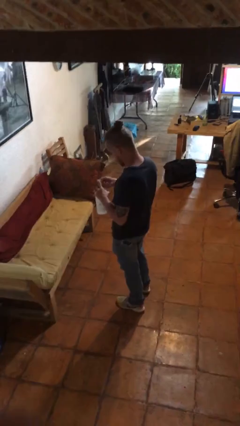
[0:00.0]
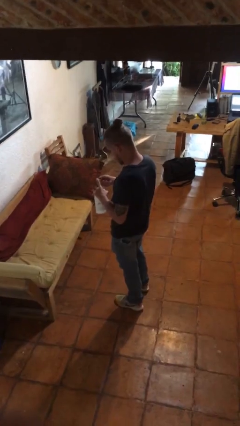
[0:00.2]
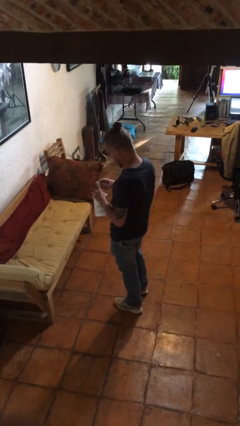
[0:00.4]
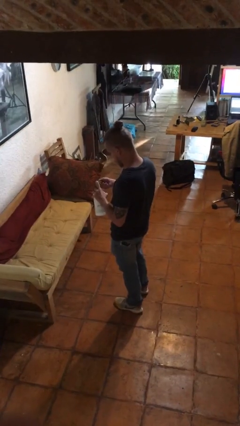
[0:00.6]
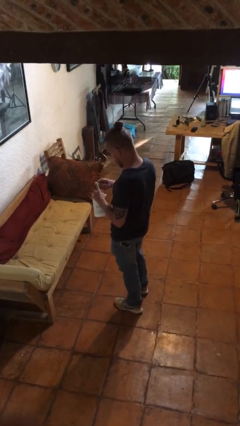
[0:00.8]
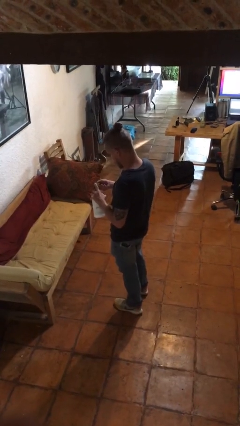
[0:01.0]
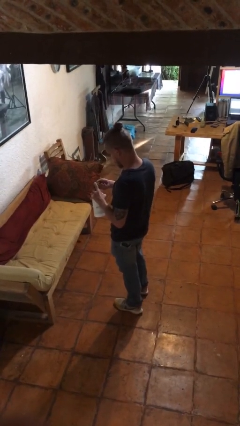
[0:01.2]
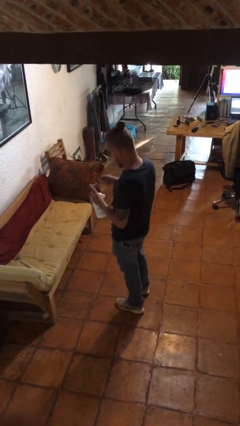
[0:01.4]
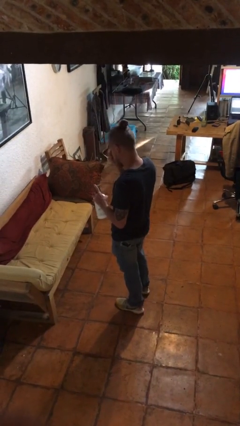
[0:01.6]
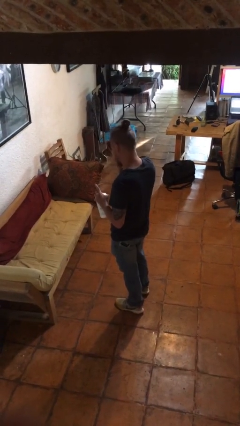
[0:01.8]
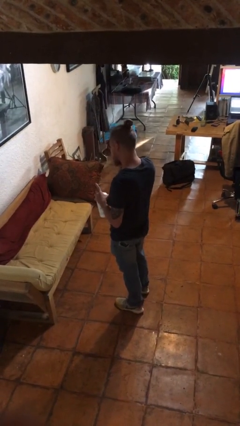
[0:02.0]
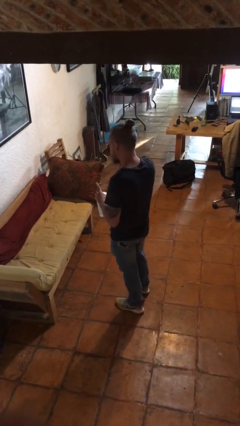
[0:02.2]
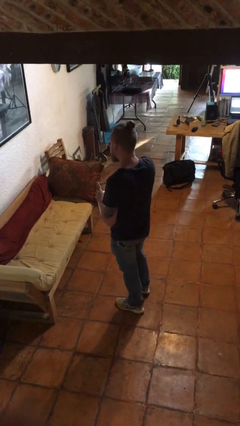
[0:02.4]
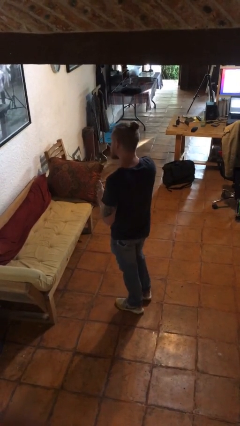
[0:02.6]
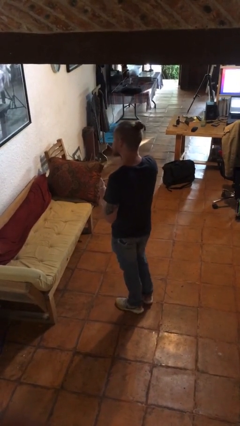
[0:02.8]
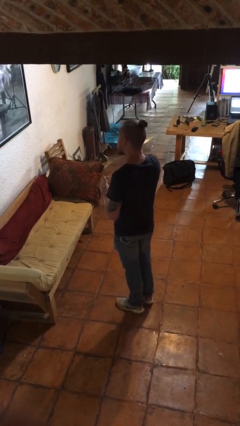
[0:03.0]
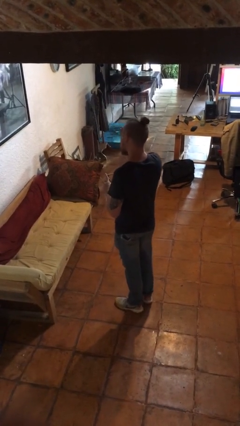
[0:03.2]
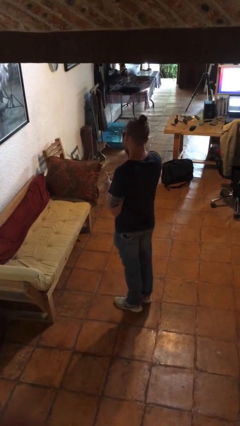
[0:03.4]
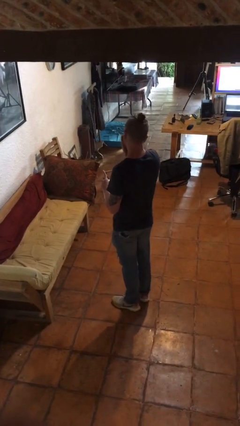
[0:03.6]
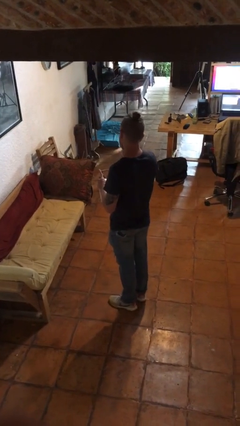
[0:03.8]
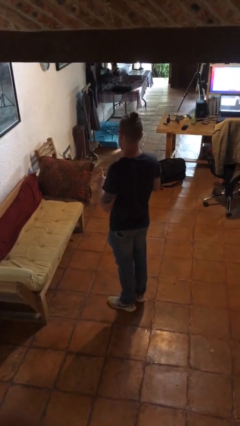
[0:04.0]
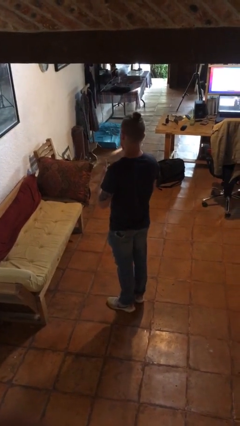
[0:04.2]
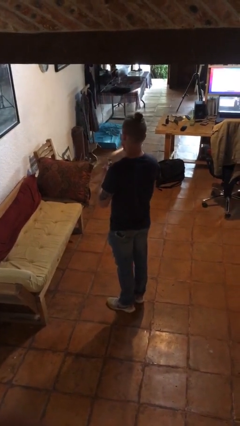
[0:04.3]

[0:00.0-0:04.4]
person applies facial moisturizer

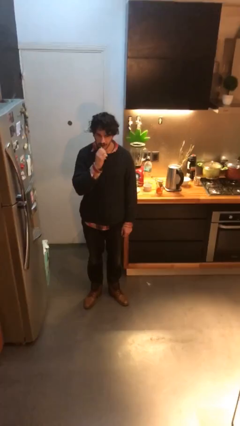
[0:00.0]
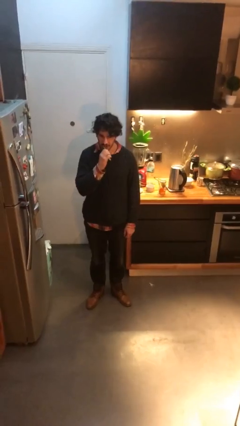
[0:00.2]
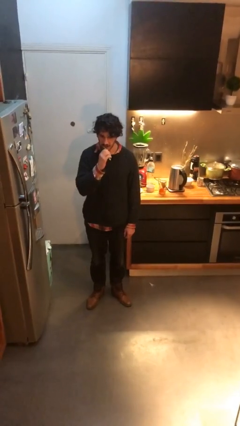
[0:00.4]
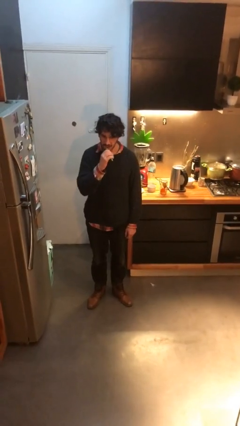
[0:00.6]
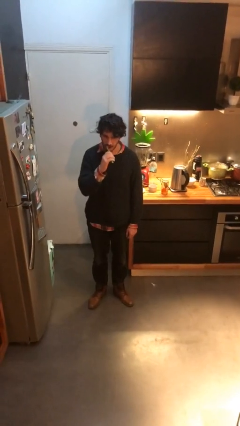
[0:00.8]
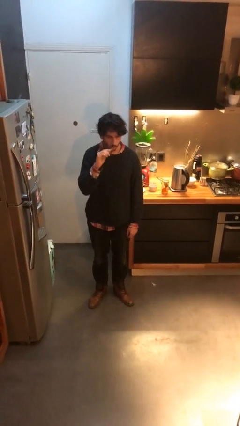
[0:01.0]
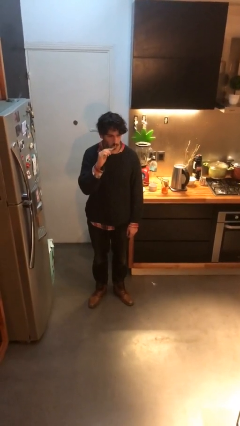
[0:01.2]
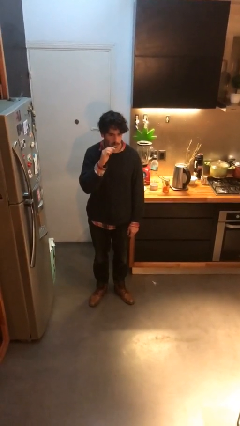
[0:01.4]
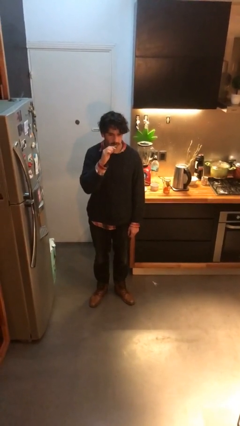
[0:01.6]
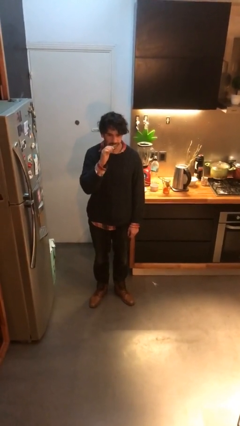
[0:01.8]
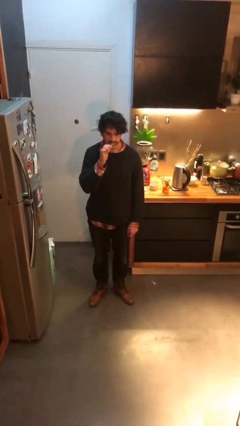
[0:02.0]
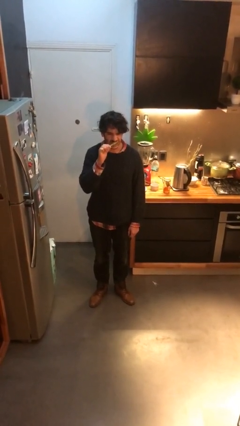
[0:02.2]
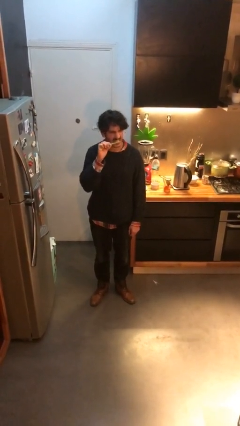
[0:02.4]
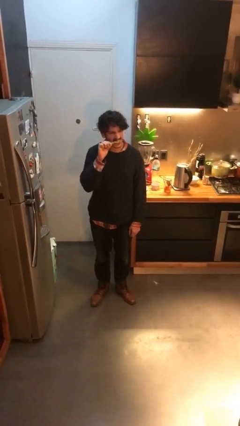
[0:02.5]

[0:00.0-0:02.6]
person brushes teeth

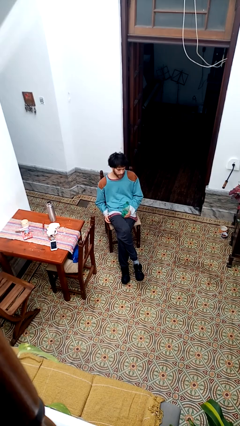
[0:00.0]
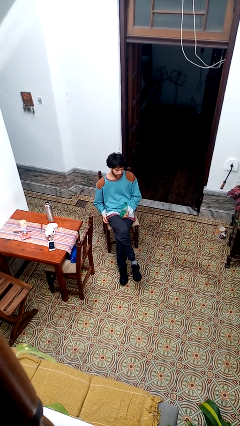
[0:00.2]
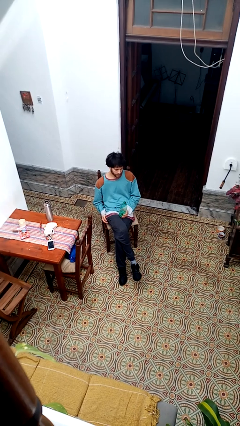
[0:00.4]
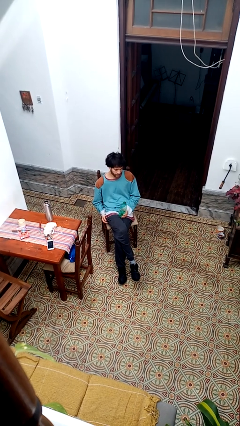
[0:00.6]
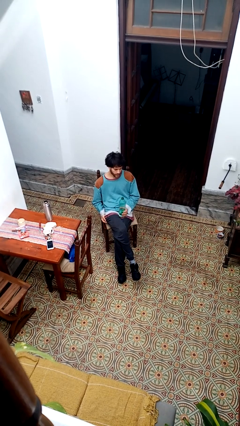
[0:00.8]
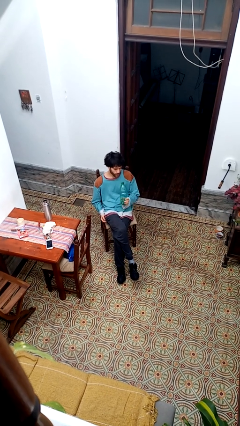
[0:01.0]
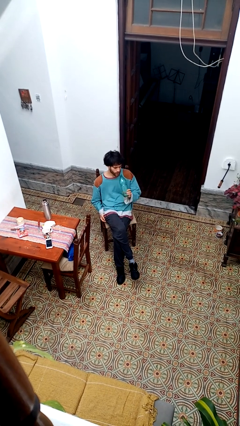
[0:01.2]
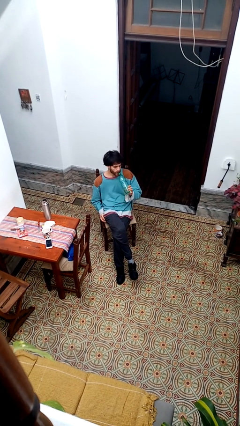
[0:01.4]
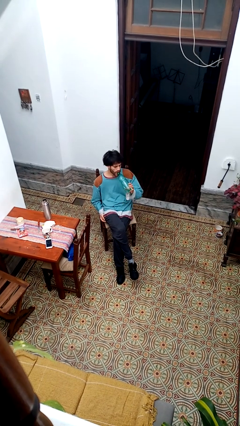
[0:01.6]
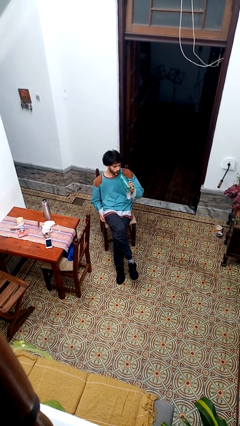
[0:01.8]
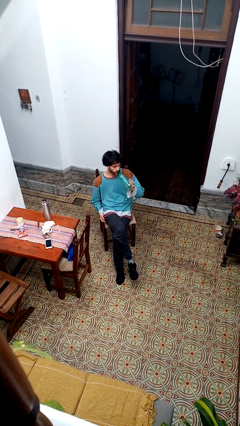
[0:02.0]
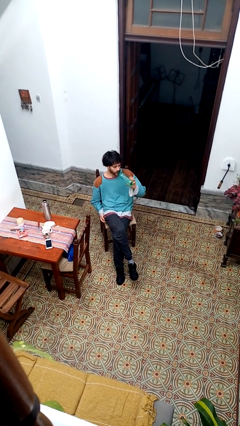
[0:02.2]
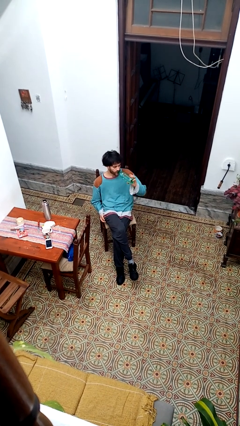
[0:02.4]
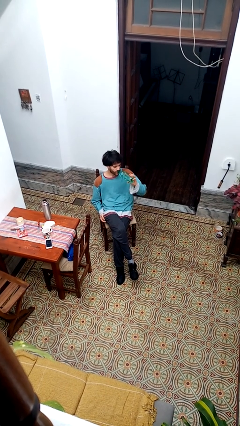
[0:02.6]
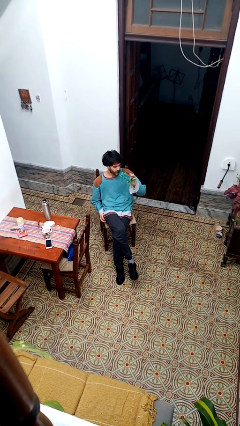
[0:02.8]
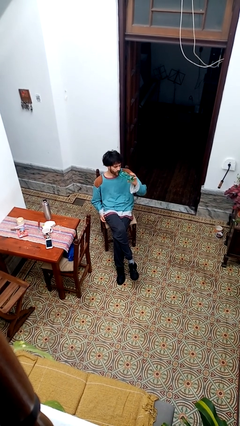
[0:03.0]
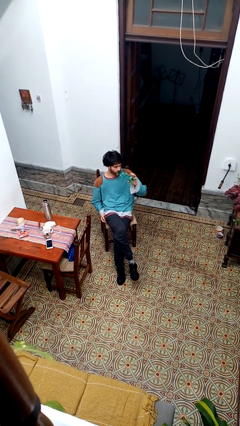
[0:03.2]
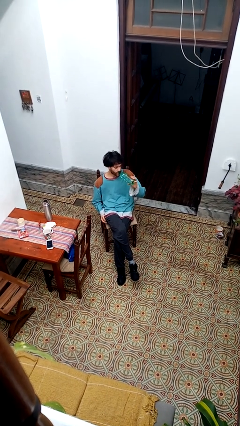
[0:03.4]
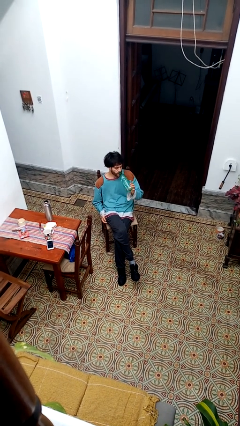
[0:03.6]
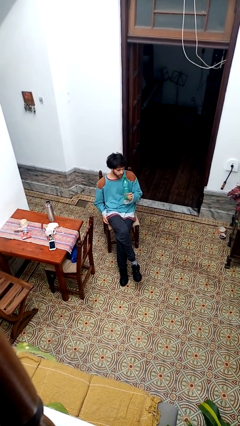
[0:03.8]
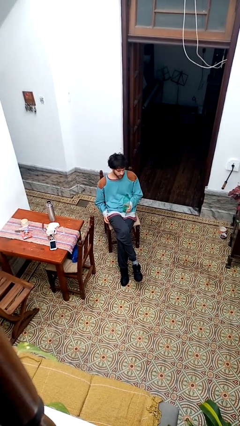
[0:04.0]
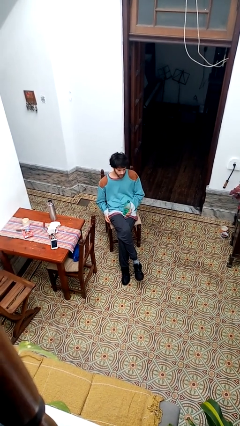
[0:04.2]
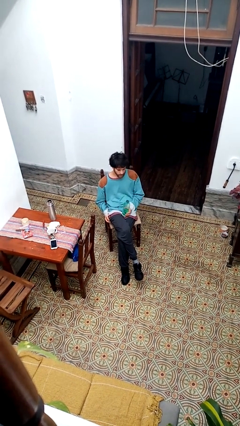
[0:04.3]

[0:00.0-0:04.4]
person drinks from bottle

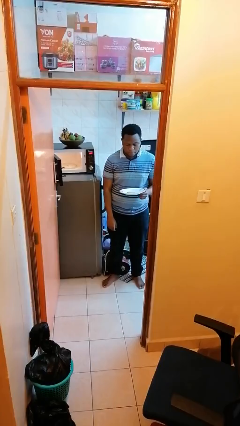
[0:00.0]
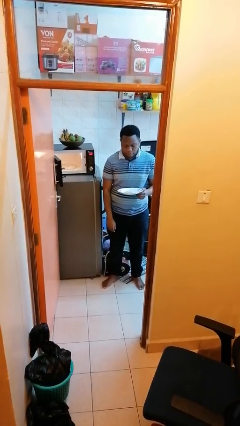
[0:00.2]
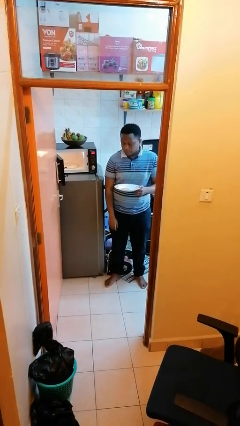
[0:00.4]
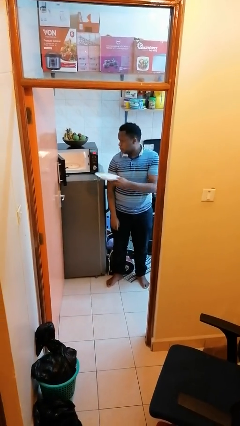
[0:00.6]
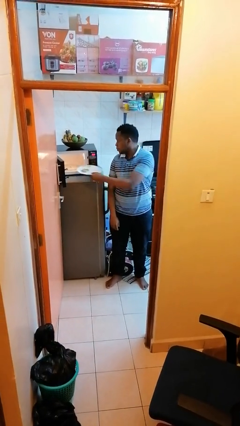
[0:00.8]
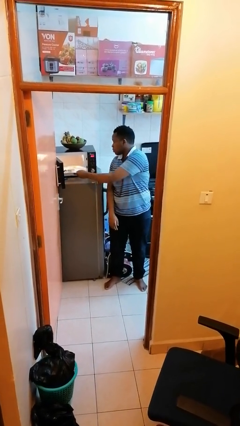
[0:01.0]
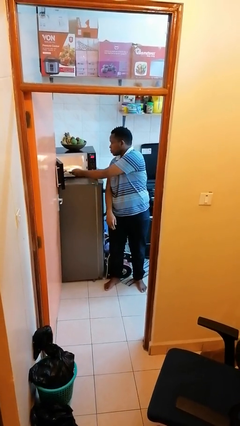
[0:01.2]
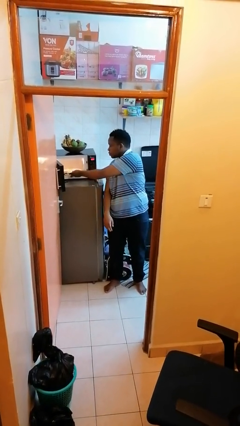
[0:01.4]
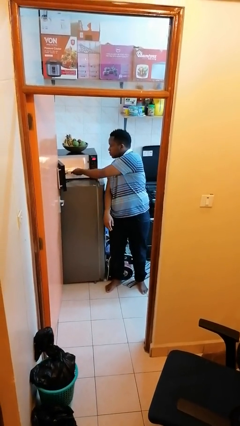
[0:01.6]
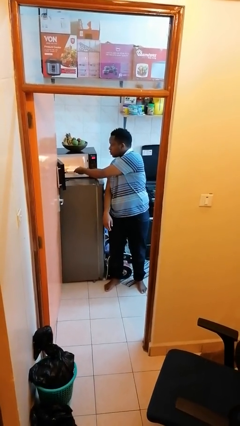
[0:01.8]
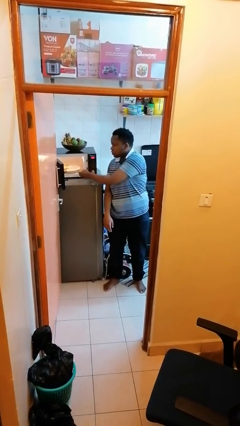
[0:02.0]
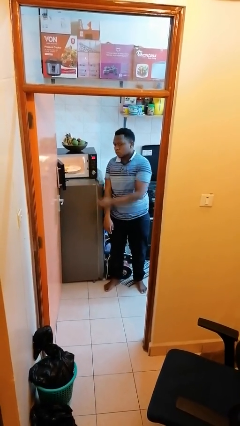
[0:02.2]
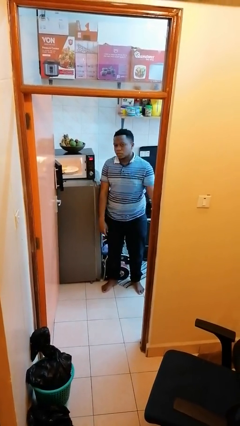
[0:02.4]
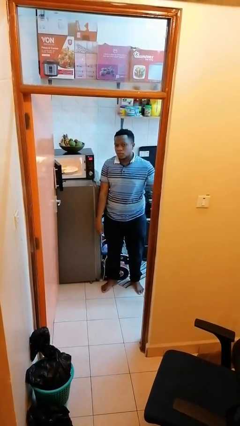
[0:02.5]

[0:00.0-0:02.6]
person puts object into microwave

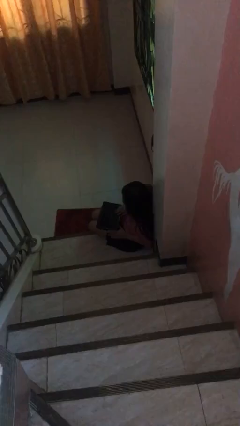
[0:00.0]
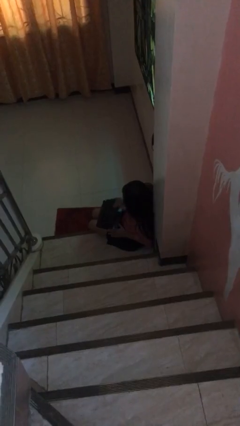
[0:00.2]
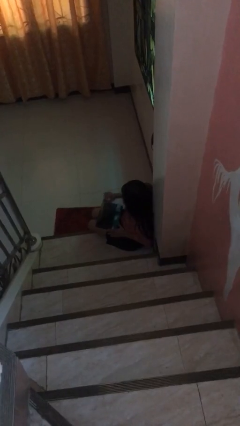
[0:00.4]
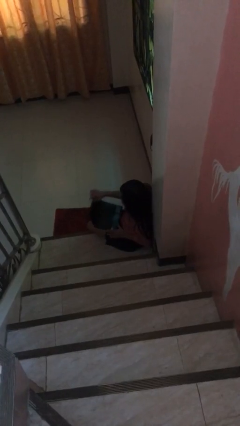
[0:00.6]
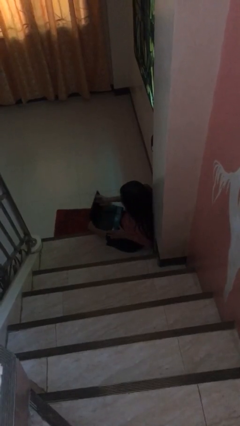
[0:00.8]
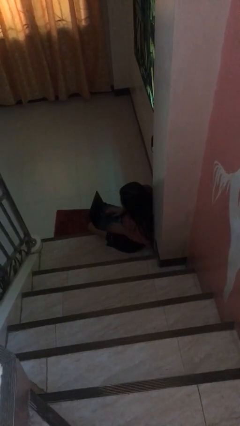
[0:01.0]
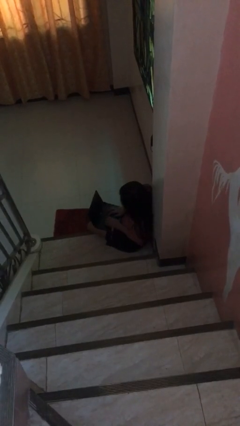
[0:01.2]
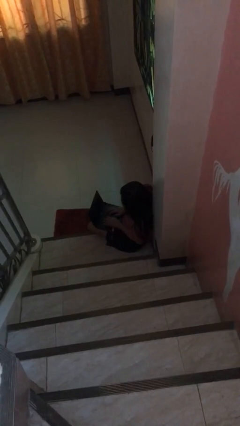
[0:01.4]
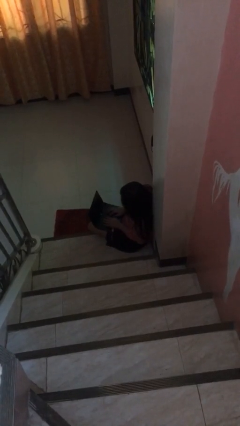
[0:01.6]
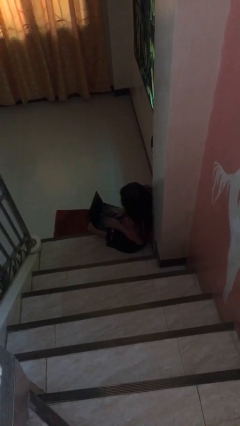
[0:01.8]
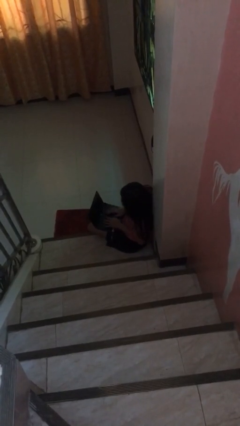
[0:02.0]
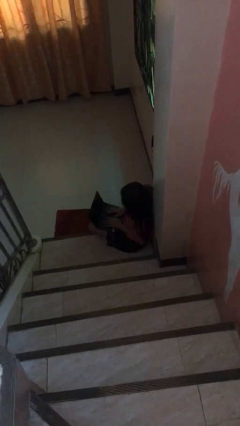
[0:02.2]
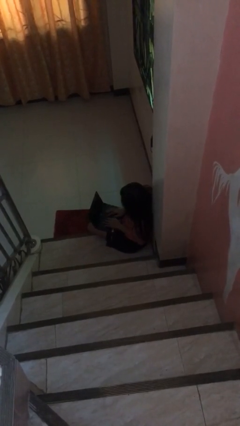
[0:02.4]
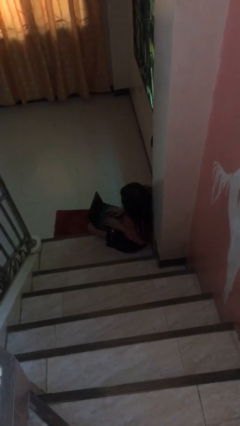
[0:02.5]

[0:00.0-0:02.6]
person interacts with laptop

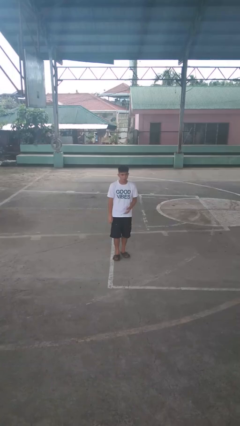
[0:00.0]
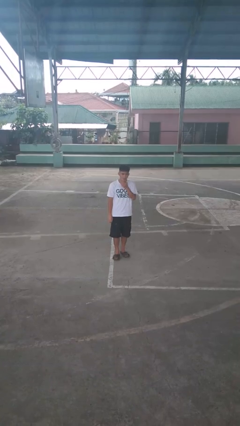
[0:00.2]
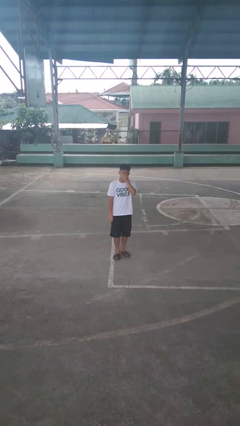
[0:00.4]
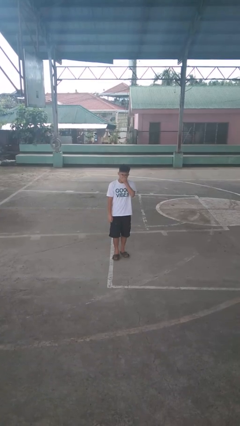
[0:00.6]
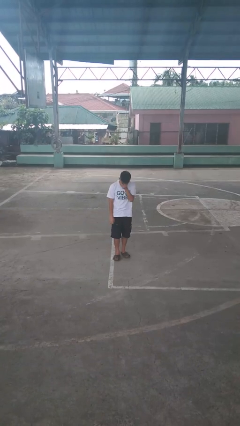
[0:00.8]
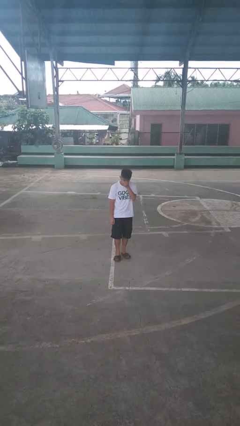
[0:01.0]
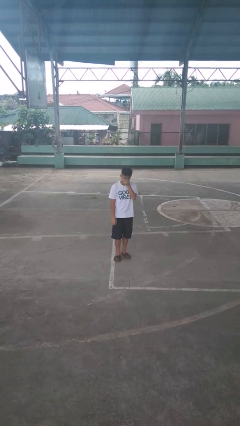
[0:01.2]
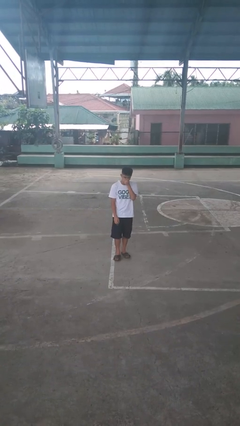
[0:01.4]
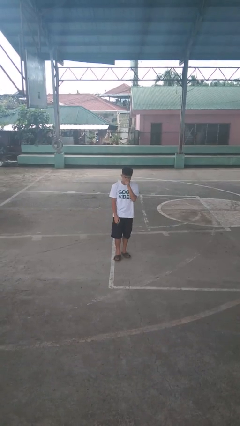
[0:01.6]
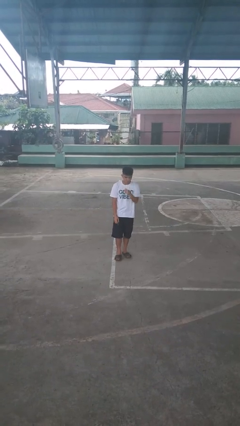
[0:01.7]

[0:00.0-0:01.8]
person sneezes into hand
